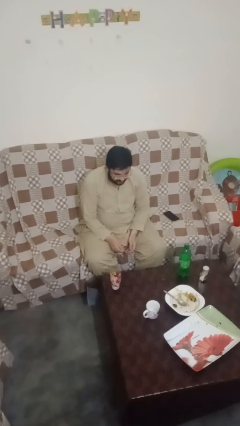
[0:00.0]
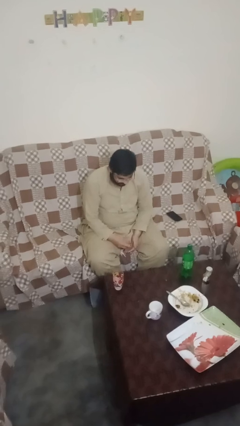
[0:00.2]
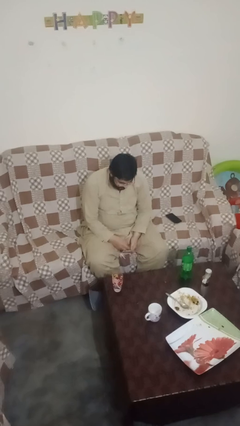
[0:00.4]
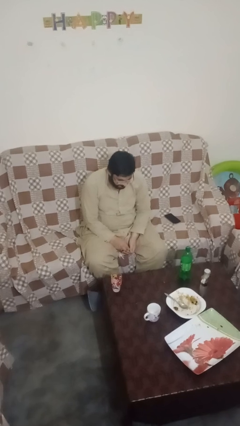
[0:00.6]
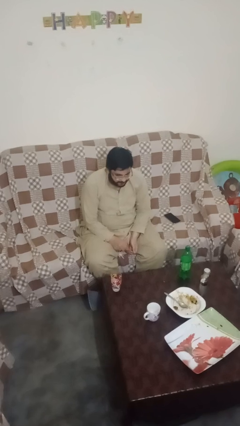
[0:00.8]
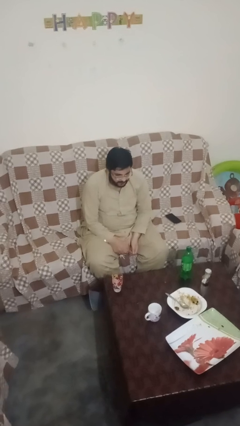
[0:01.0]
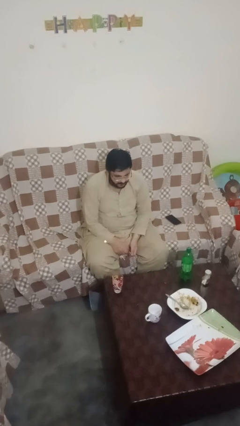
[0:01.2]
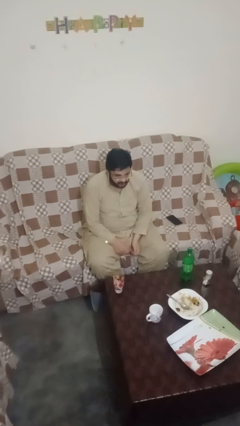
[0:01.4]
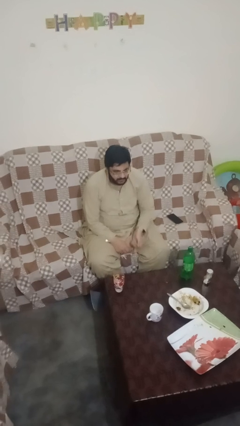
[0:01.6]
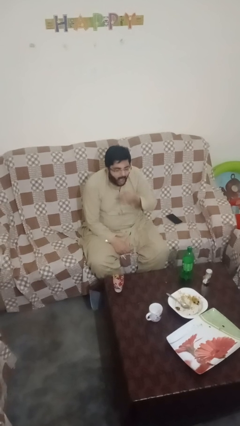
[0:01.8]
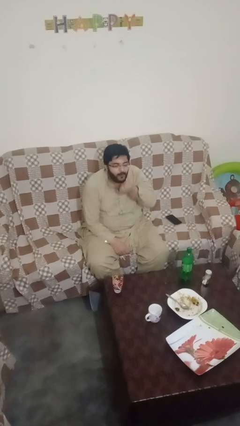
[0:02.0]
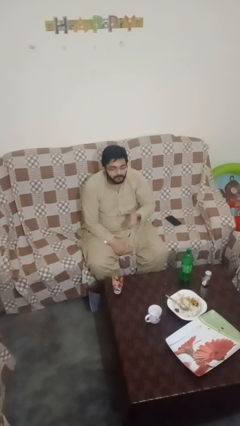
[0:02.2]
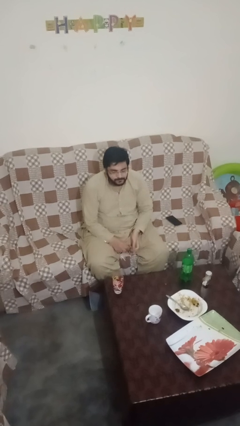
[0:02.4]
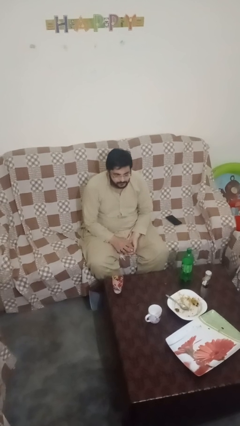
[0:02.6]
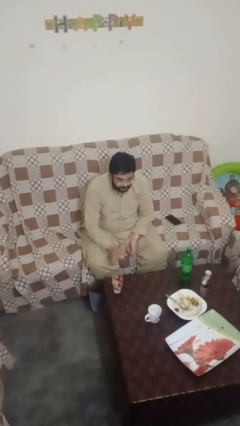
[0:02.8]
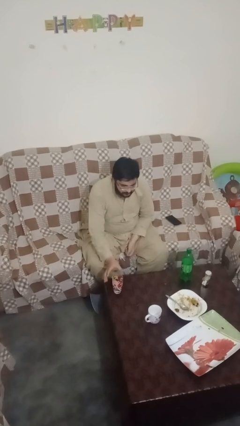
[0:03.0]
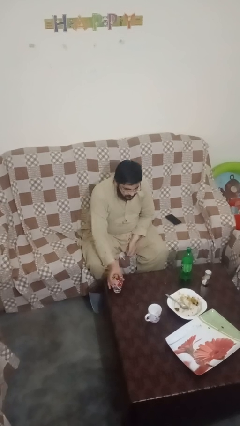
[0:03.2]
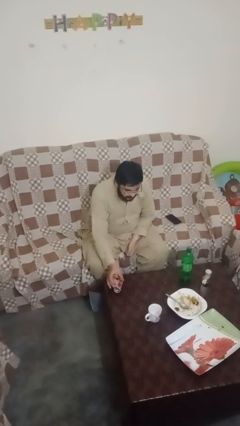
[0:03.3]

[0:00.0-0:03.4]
person takes medicine pills

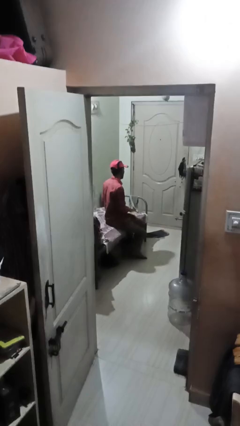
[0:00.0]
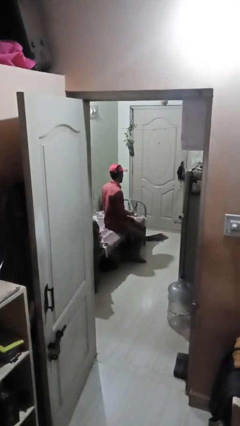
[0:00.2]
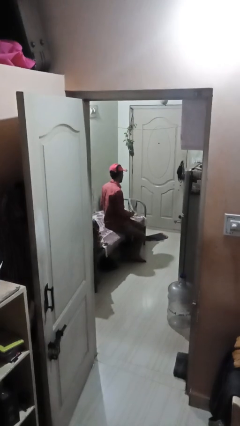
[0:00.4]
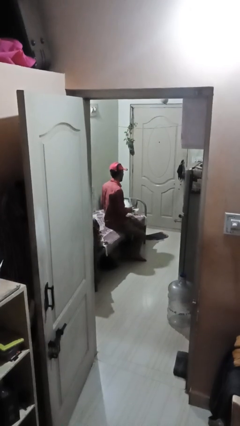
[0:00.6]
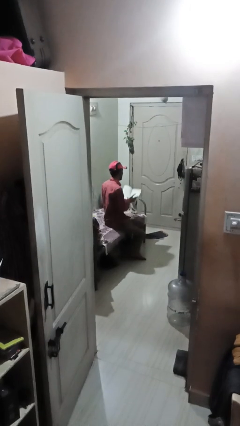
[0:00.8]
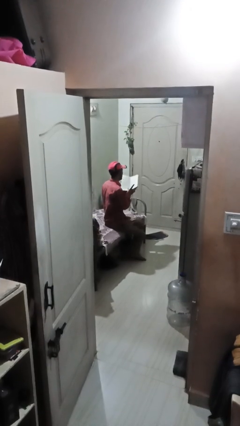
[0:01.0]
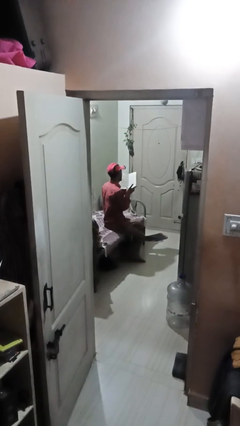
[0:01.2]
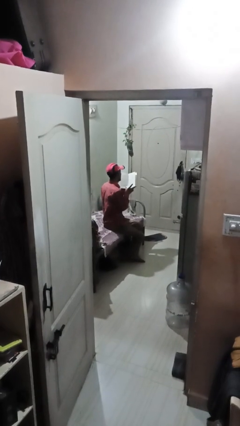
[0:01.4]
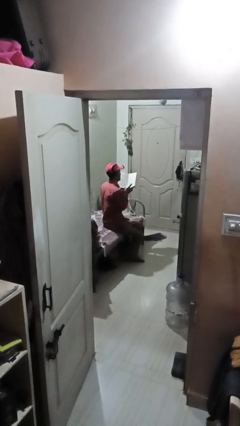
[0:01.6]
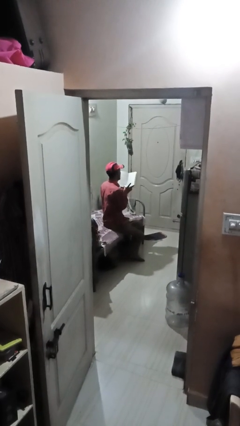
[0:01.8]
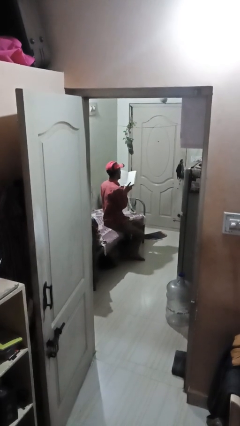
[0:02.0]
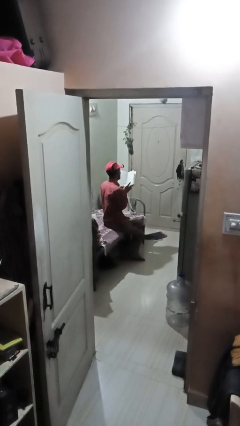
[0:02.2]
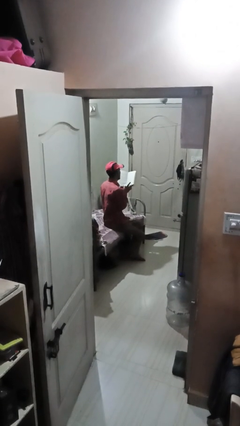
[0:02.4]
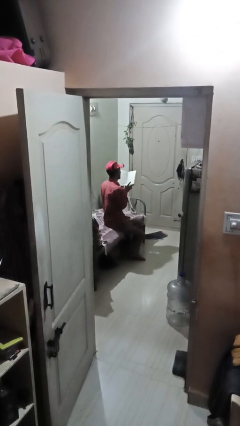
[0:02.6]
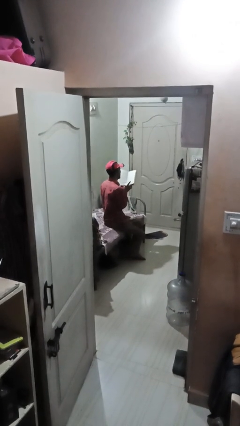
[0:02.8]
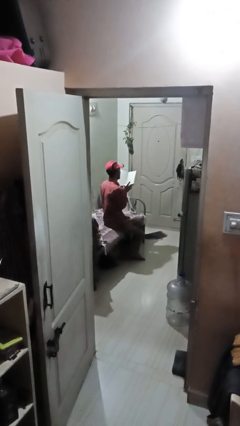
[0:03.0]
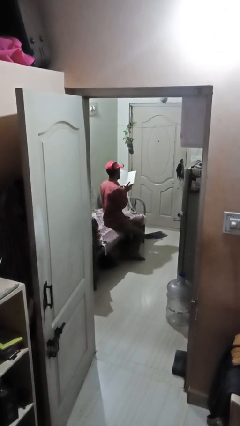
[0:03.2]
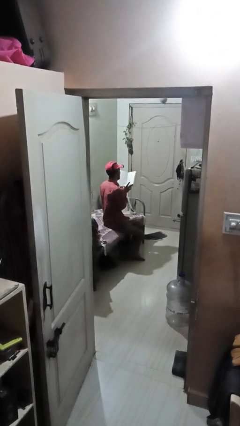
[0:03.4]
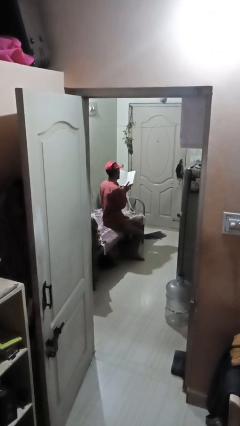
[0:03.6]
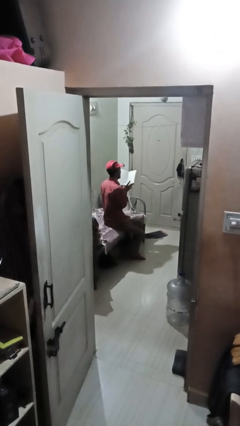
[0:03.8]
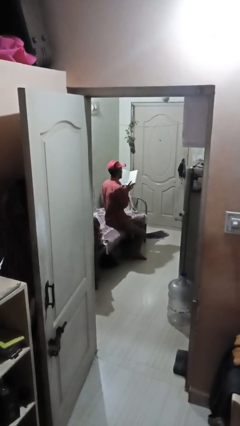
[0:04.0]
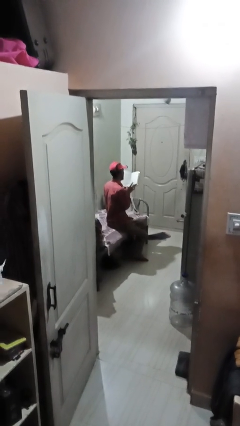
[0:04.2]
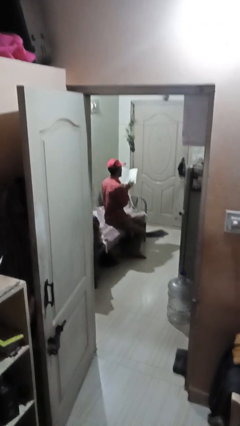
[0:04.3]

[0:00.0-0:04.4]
person reads book

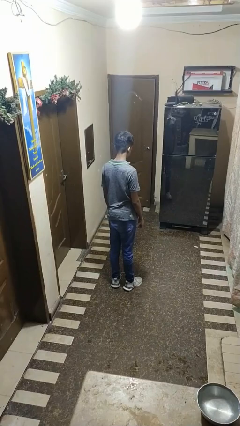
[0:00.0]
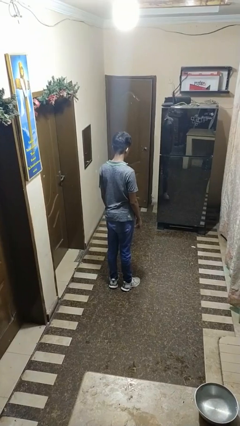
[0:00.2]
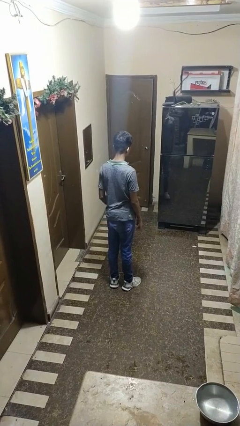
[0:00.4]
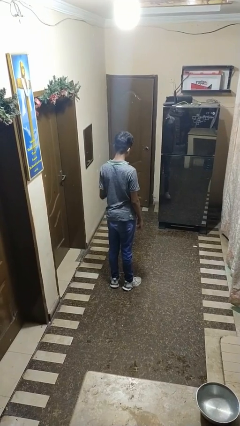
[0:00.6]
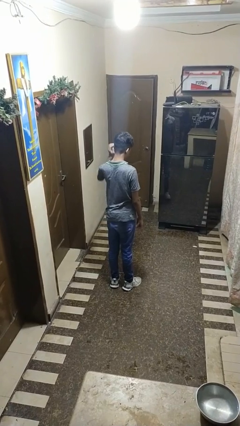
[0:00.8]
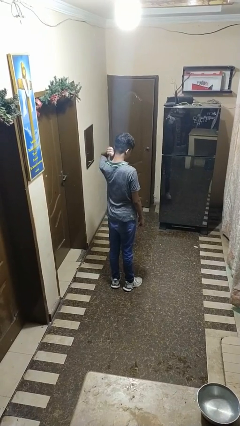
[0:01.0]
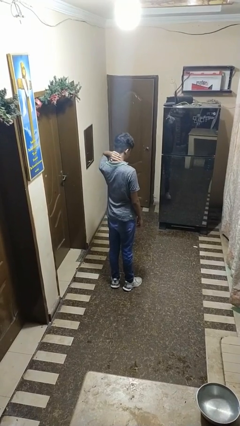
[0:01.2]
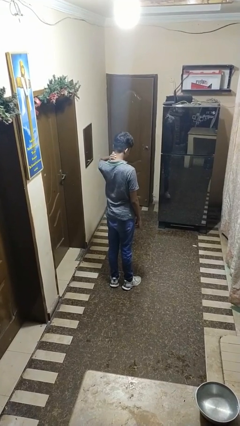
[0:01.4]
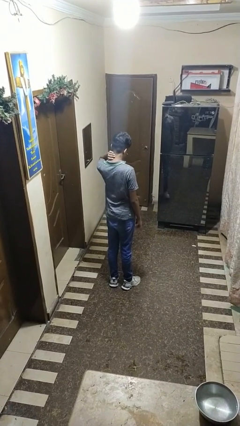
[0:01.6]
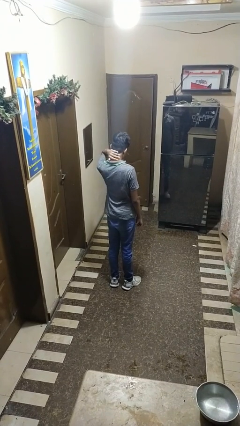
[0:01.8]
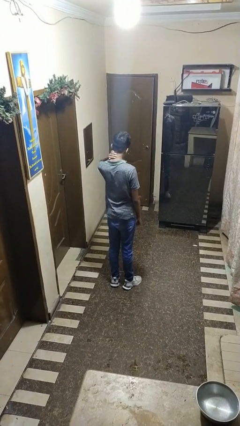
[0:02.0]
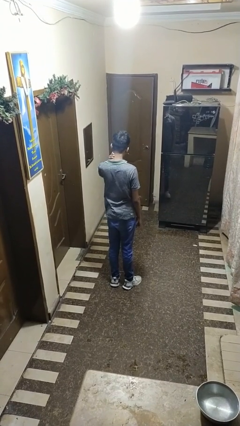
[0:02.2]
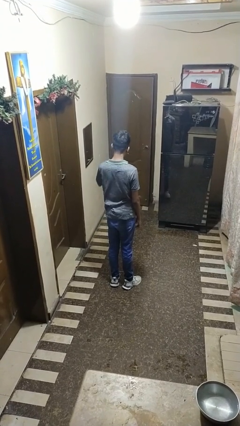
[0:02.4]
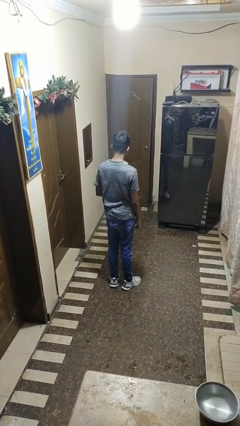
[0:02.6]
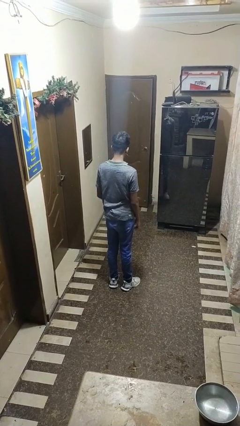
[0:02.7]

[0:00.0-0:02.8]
person rubs neck

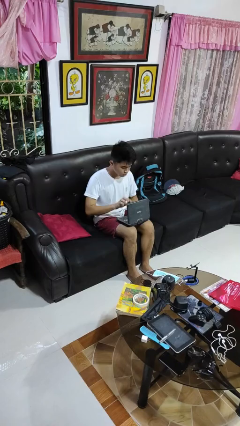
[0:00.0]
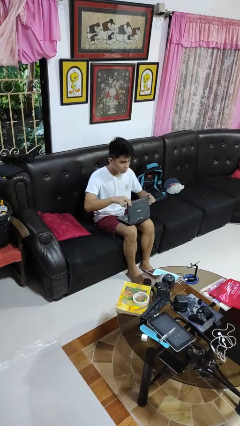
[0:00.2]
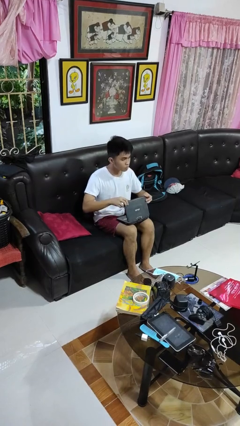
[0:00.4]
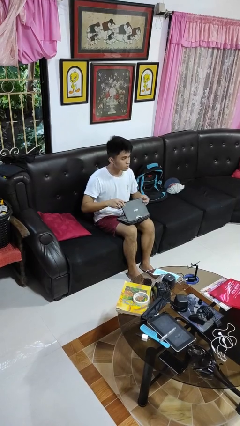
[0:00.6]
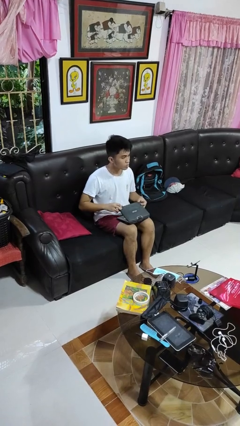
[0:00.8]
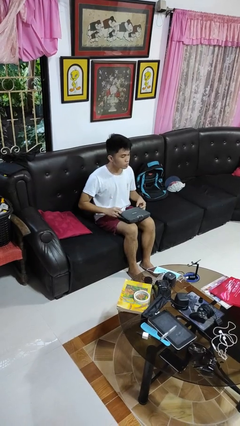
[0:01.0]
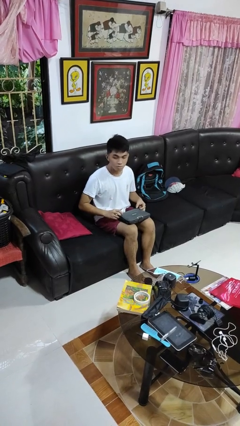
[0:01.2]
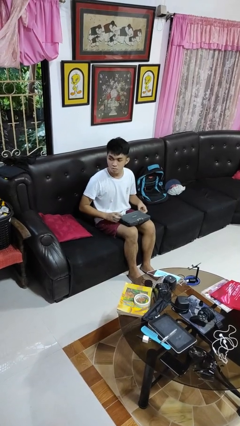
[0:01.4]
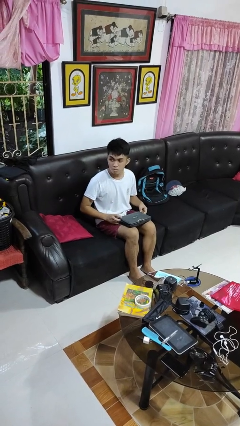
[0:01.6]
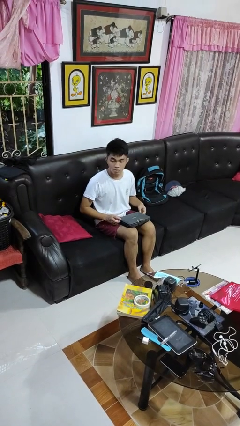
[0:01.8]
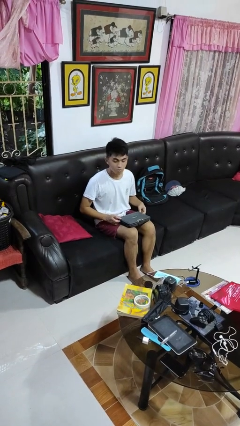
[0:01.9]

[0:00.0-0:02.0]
person closes laptop

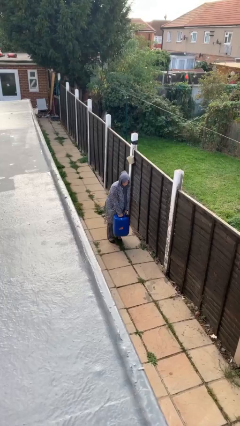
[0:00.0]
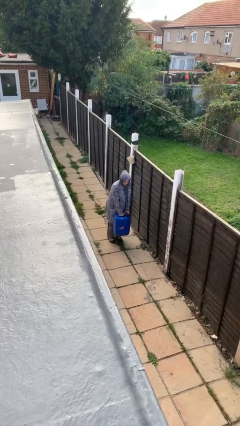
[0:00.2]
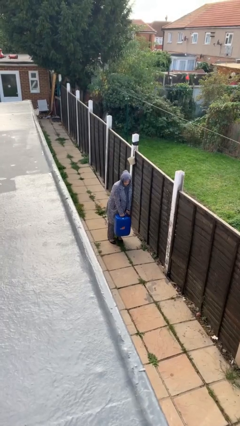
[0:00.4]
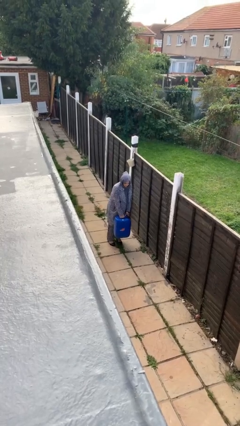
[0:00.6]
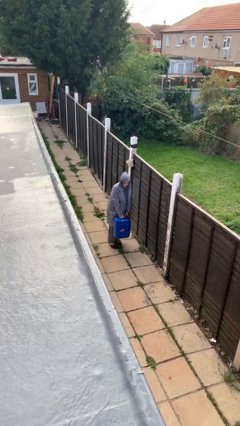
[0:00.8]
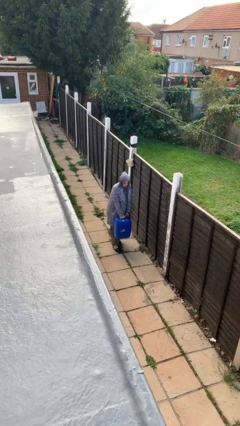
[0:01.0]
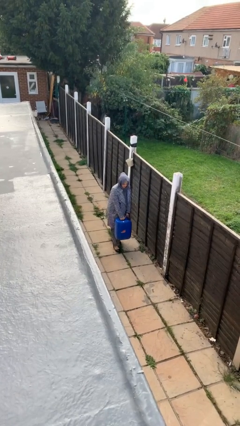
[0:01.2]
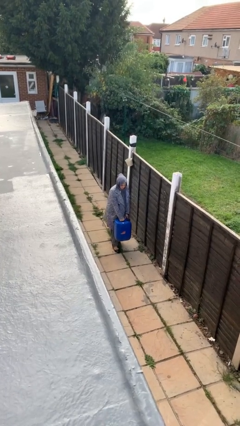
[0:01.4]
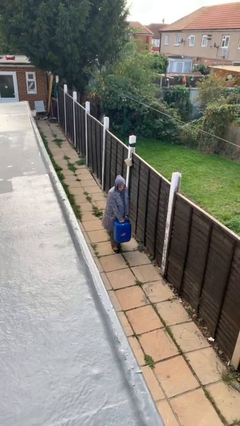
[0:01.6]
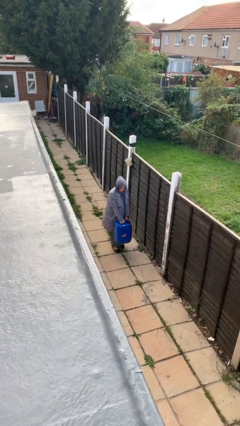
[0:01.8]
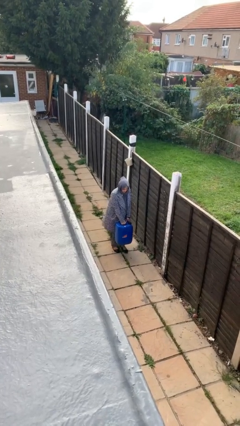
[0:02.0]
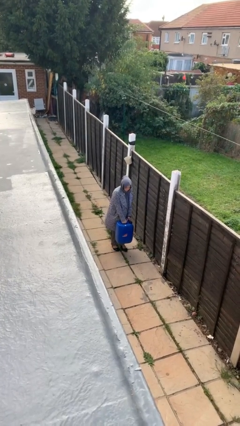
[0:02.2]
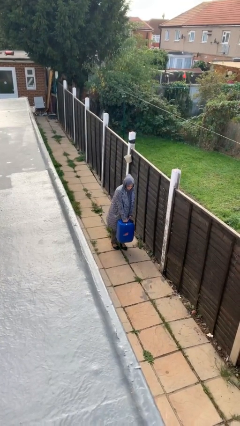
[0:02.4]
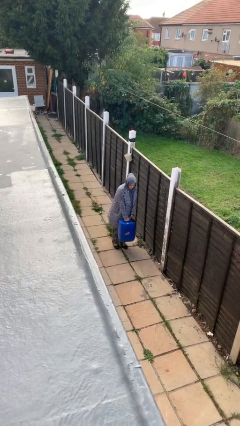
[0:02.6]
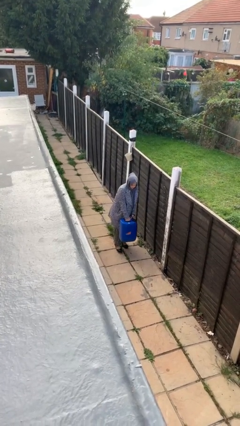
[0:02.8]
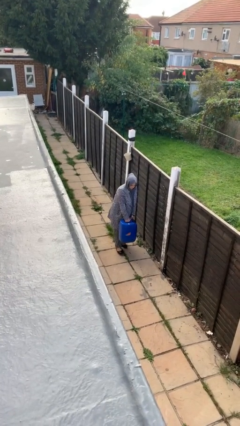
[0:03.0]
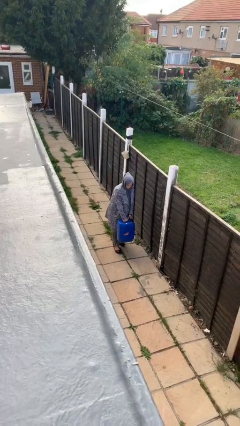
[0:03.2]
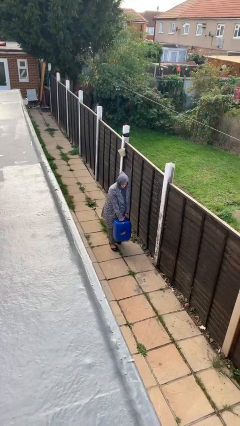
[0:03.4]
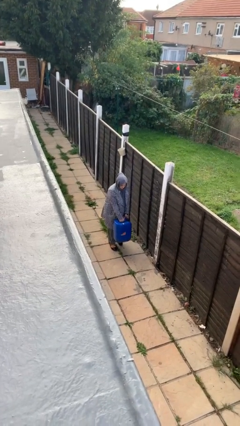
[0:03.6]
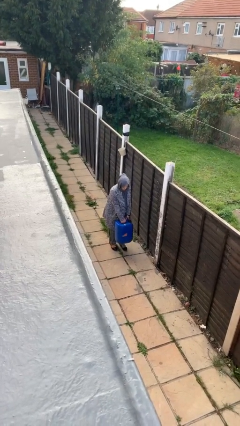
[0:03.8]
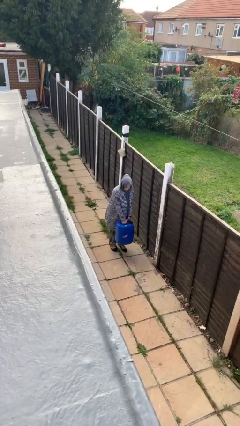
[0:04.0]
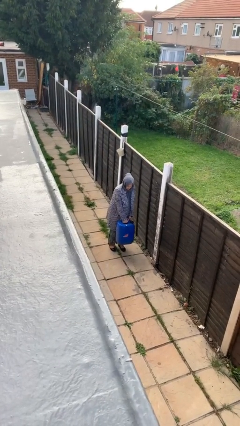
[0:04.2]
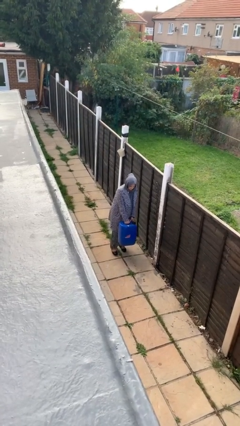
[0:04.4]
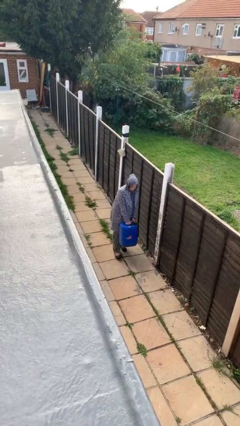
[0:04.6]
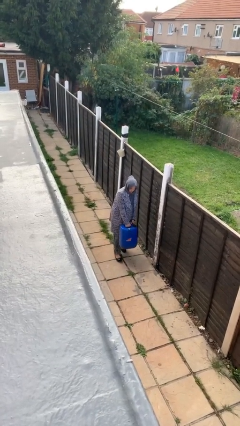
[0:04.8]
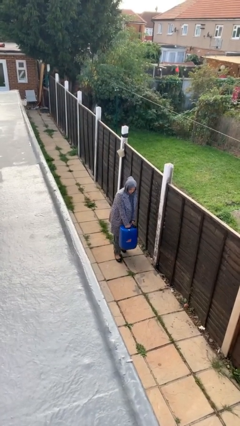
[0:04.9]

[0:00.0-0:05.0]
person carries heavy object
